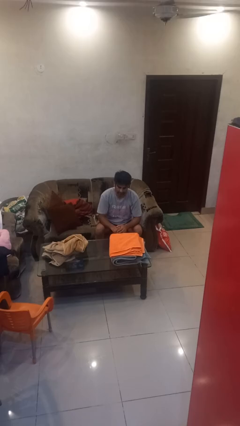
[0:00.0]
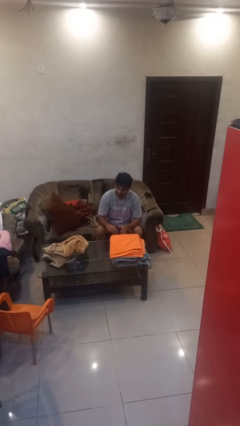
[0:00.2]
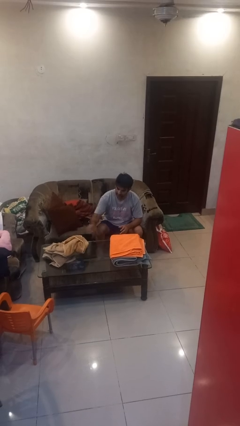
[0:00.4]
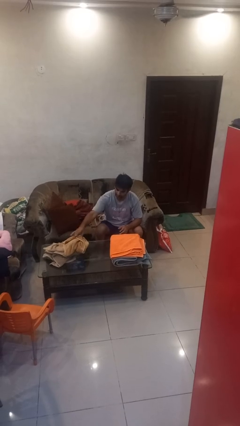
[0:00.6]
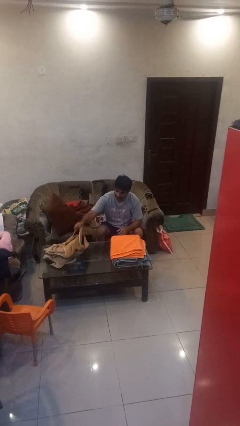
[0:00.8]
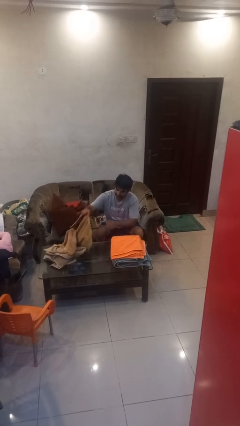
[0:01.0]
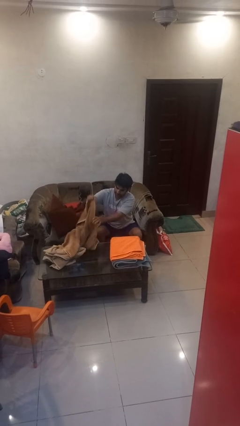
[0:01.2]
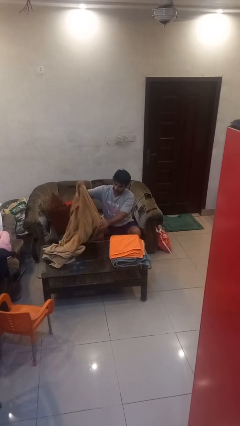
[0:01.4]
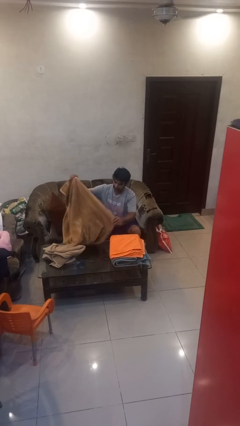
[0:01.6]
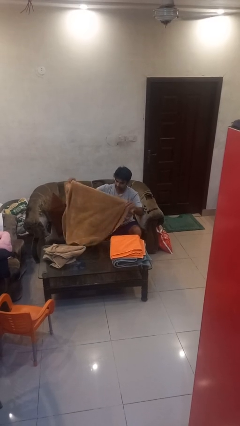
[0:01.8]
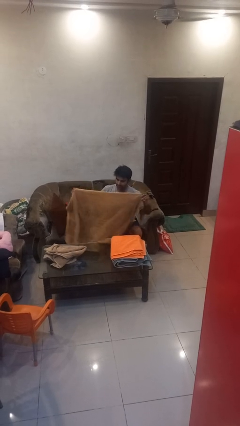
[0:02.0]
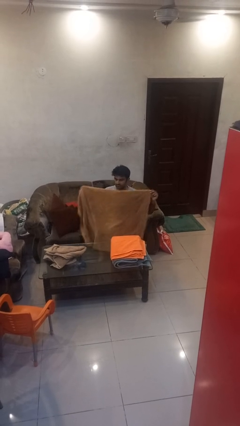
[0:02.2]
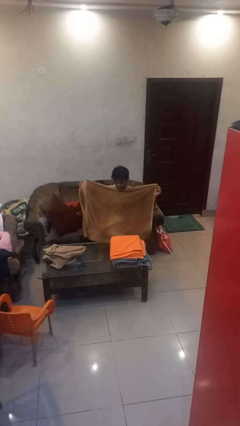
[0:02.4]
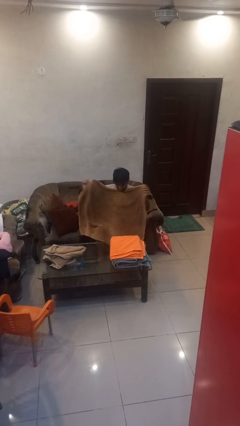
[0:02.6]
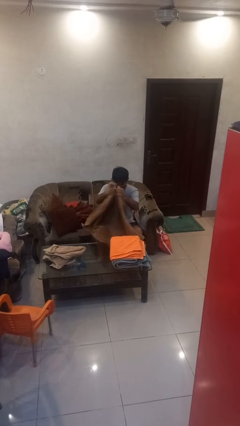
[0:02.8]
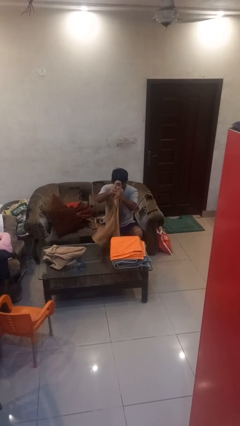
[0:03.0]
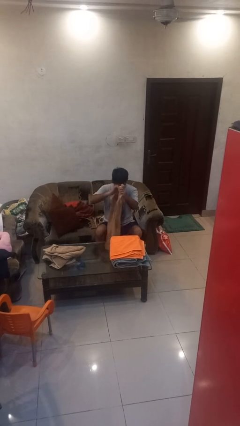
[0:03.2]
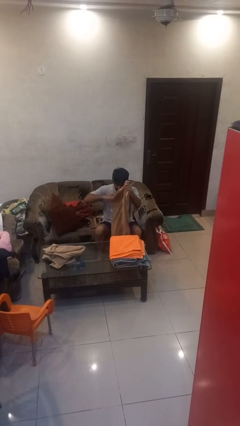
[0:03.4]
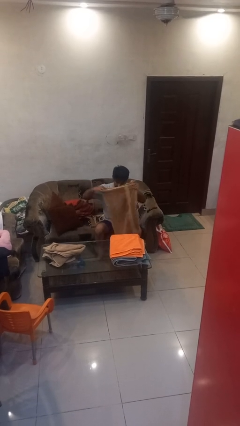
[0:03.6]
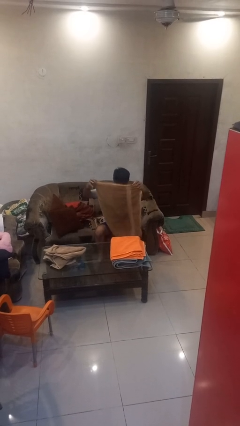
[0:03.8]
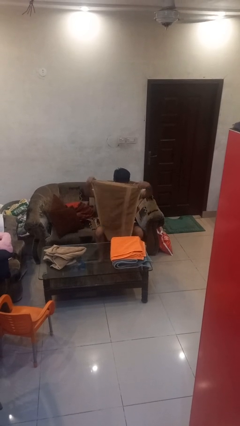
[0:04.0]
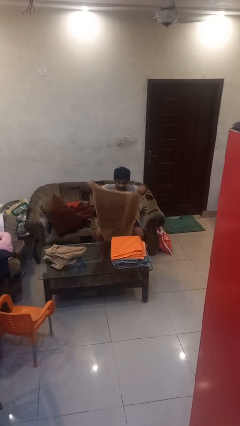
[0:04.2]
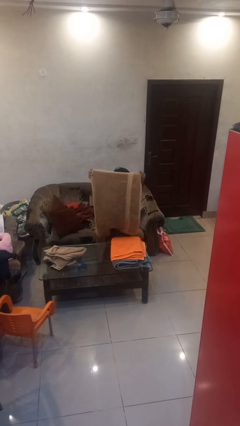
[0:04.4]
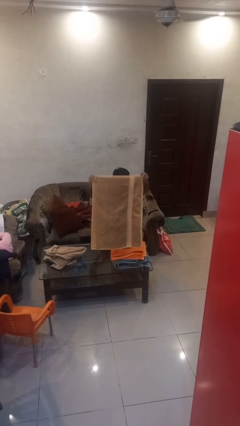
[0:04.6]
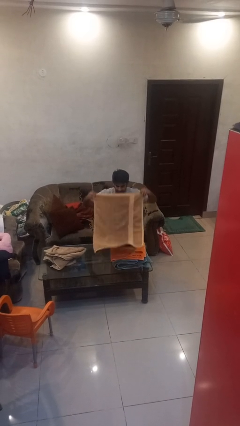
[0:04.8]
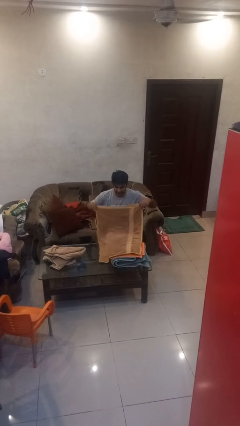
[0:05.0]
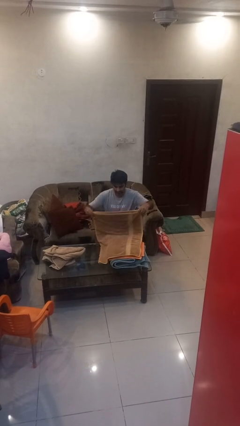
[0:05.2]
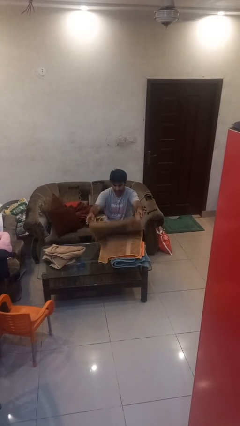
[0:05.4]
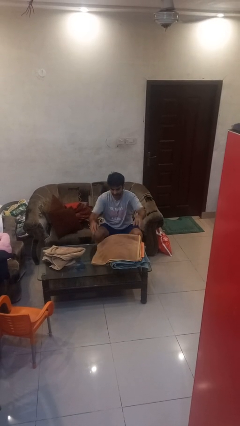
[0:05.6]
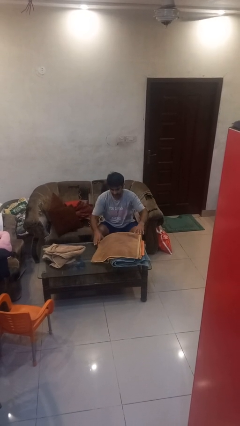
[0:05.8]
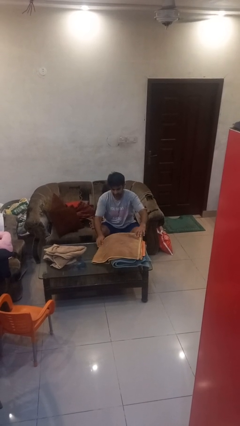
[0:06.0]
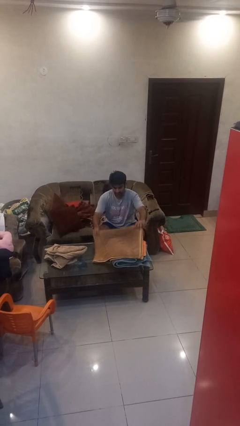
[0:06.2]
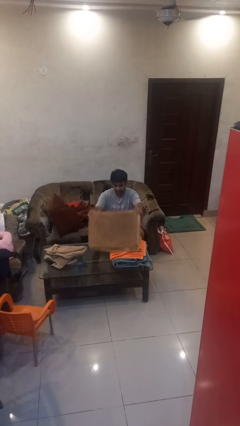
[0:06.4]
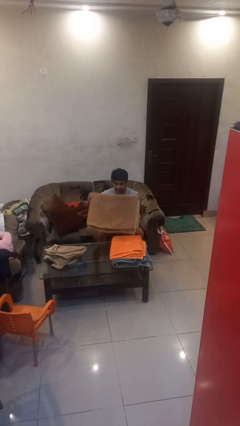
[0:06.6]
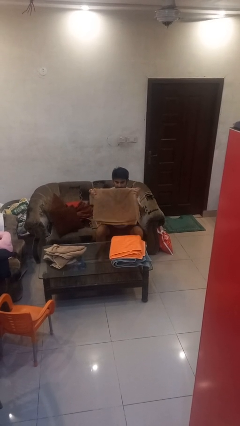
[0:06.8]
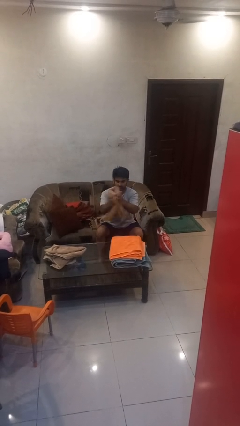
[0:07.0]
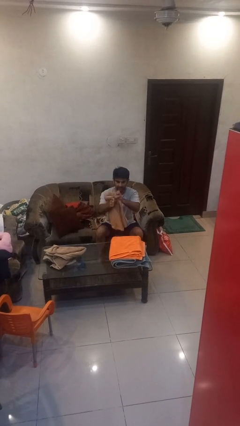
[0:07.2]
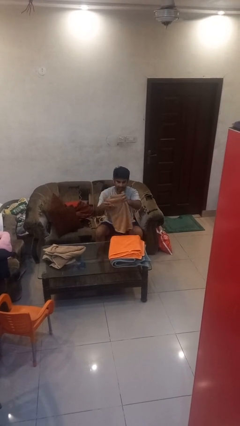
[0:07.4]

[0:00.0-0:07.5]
person folds towel

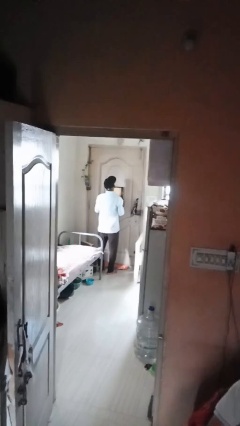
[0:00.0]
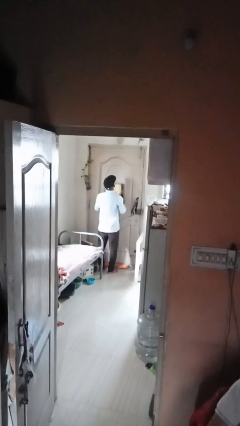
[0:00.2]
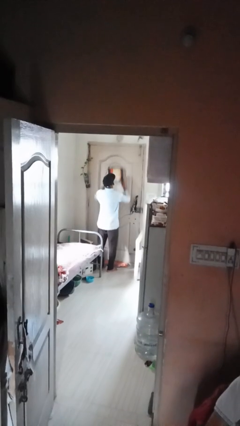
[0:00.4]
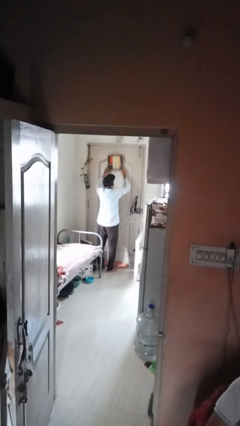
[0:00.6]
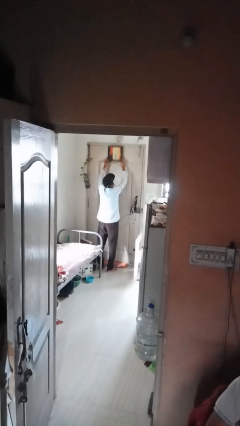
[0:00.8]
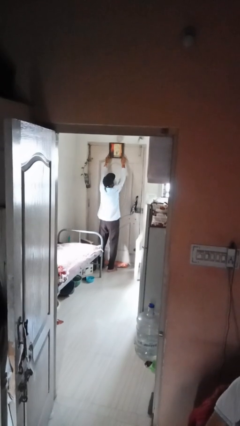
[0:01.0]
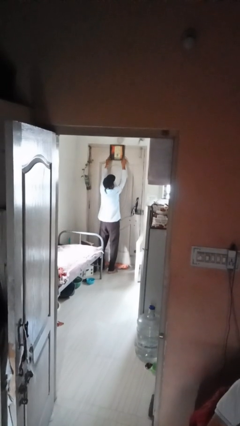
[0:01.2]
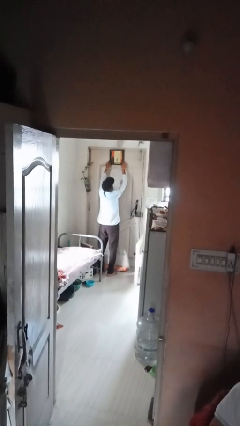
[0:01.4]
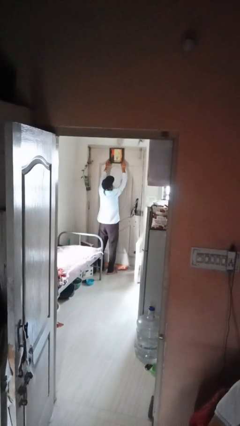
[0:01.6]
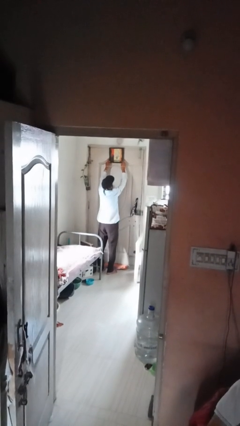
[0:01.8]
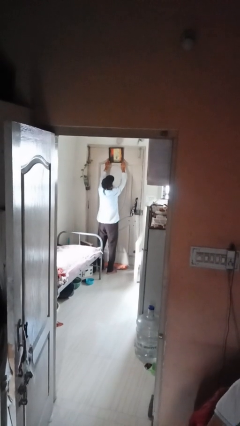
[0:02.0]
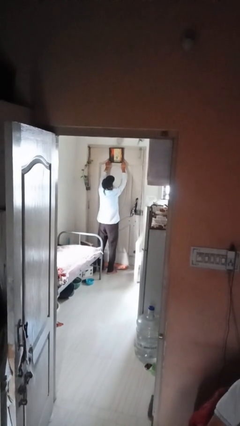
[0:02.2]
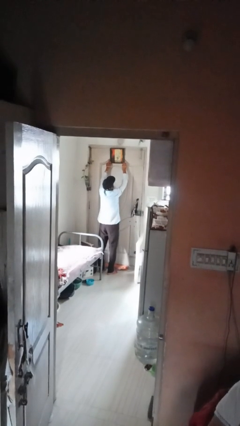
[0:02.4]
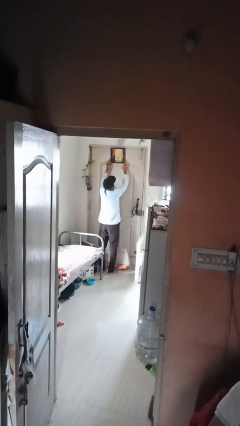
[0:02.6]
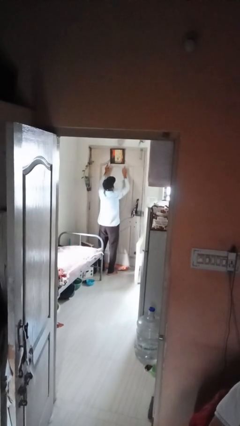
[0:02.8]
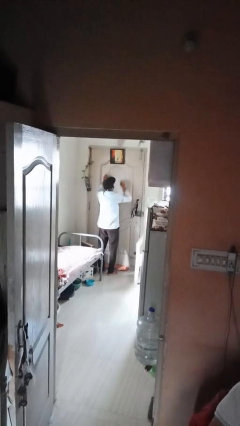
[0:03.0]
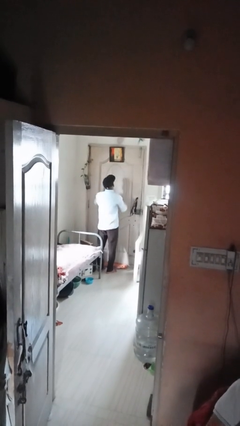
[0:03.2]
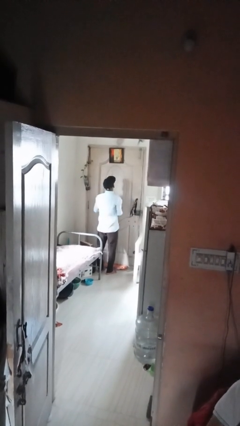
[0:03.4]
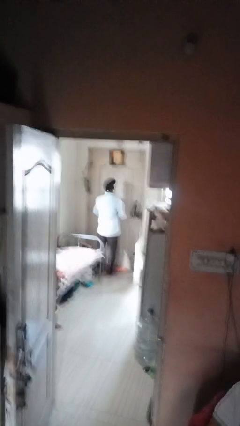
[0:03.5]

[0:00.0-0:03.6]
person puts up picture frame

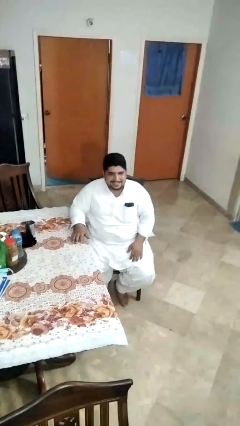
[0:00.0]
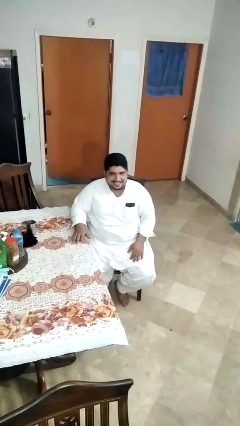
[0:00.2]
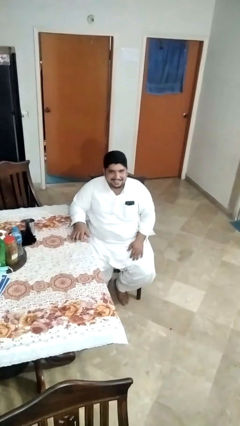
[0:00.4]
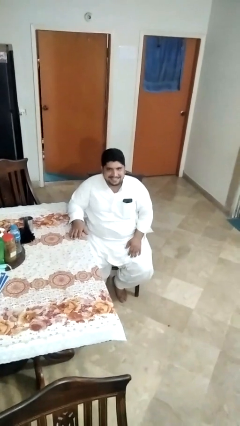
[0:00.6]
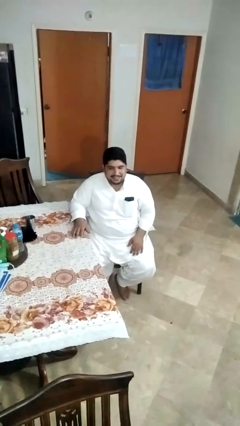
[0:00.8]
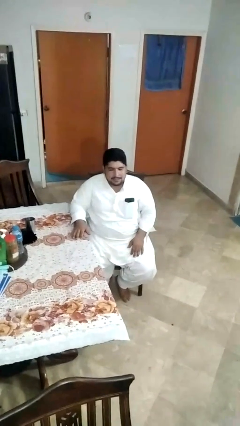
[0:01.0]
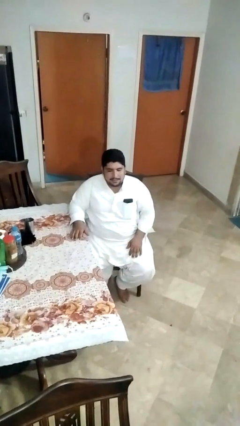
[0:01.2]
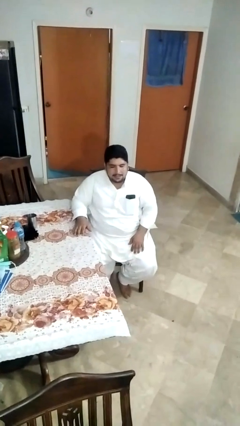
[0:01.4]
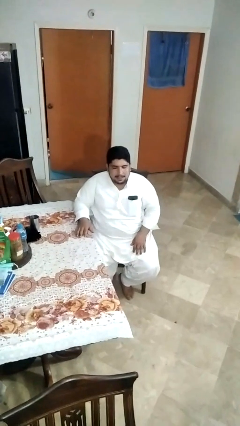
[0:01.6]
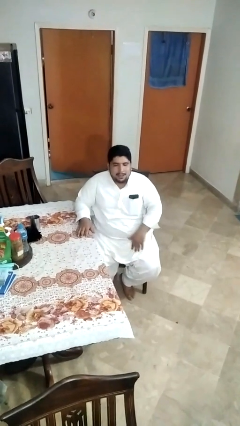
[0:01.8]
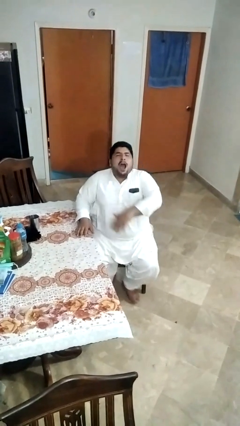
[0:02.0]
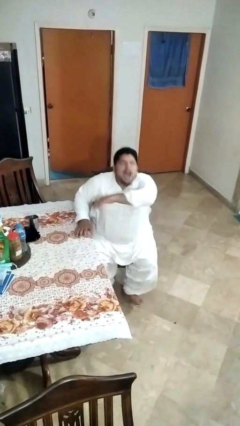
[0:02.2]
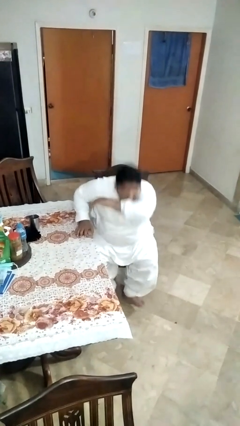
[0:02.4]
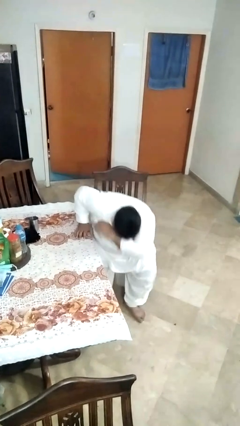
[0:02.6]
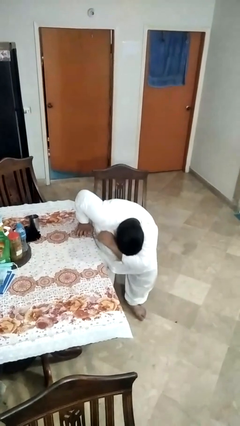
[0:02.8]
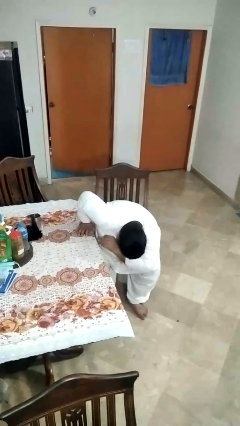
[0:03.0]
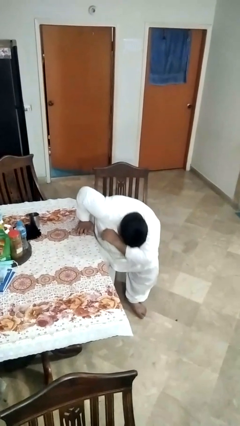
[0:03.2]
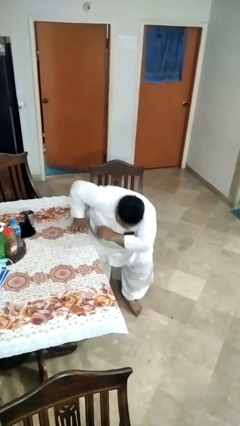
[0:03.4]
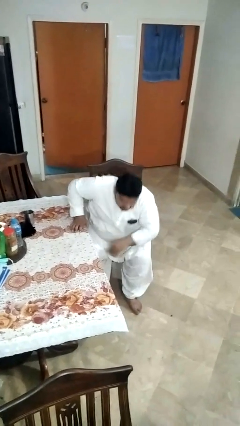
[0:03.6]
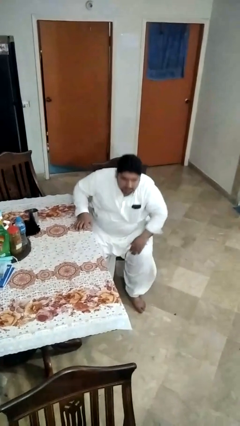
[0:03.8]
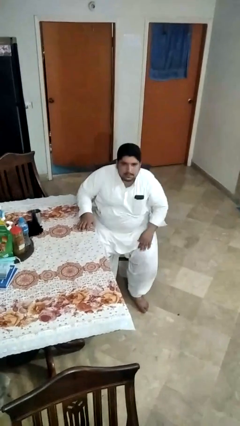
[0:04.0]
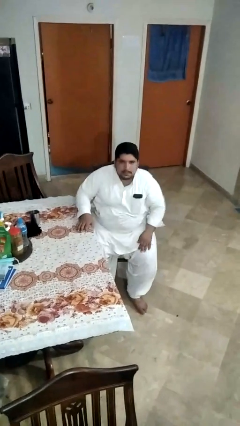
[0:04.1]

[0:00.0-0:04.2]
person sneezes into arm

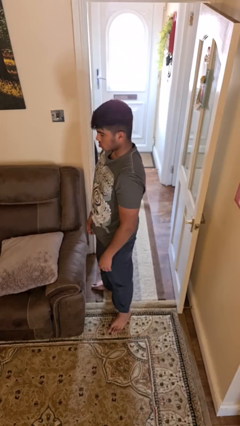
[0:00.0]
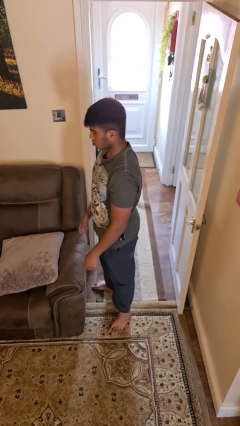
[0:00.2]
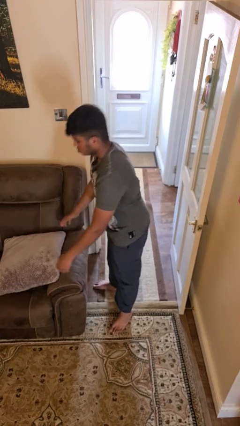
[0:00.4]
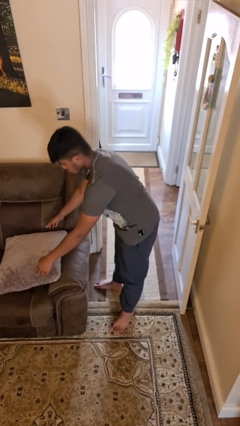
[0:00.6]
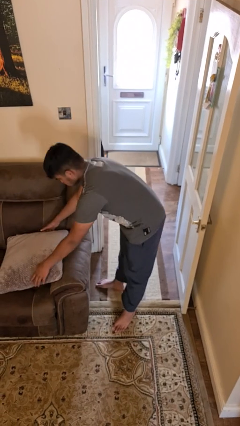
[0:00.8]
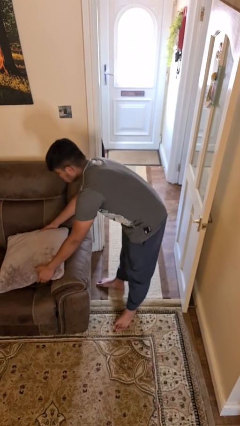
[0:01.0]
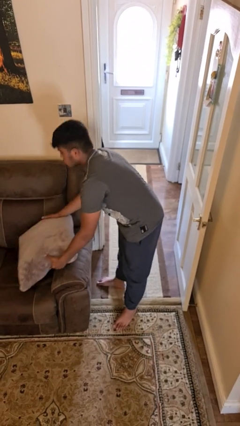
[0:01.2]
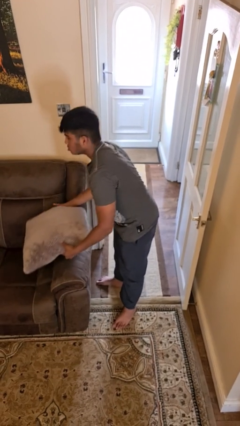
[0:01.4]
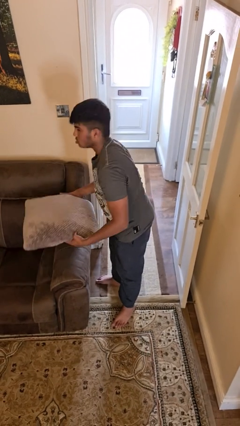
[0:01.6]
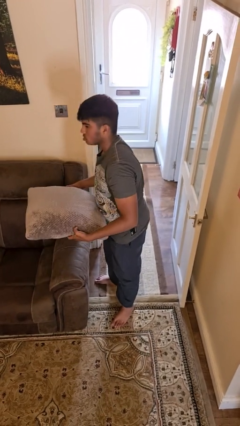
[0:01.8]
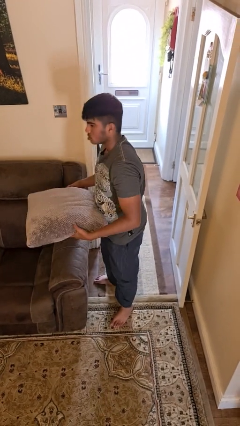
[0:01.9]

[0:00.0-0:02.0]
person picks up object from couch

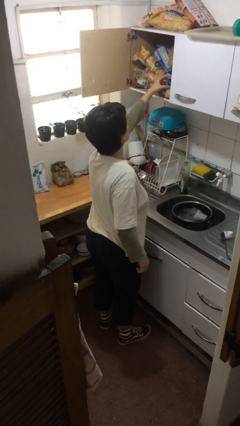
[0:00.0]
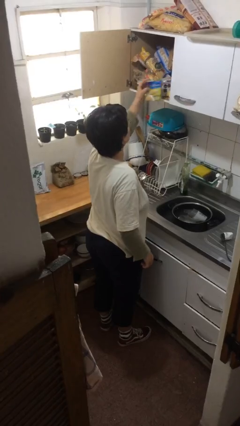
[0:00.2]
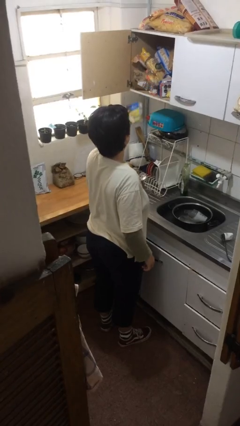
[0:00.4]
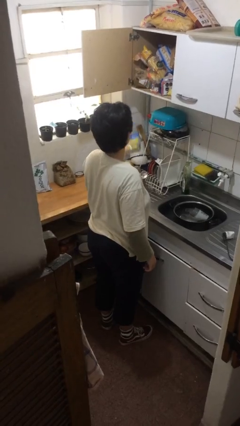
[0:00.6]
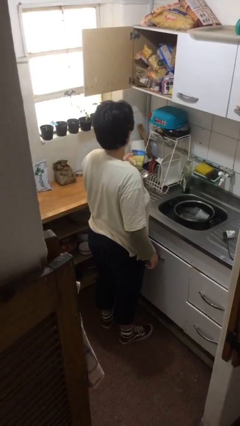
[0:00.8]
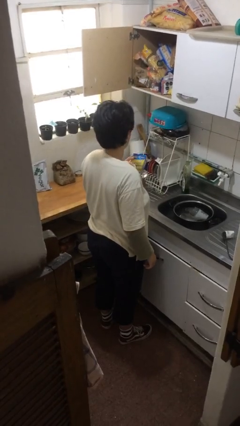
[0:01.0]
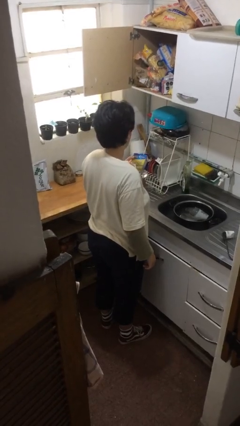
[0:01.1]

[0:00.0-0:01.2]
person takes object from cabinet
